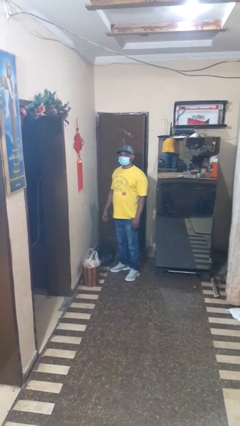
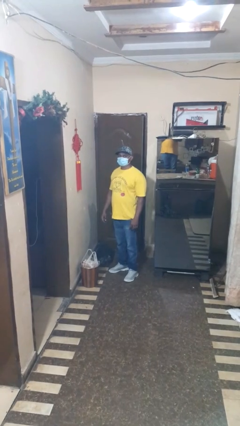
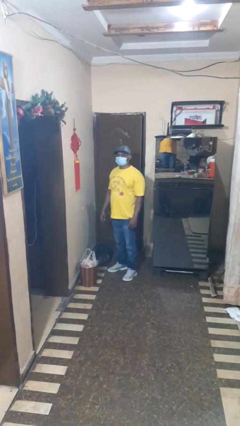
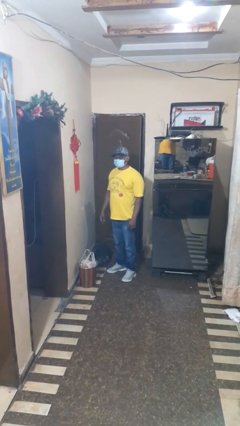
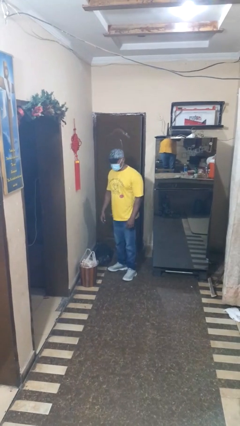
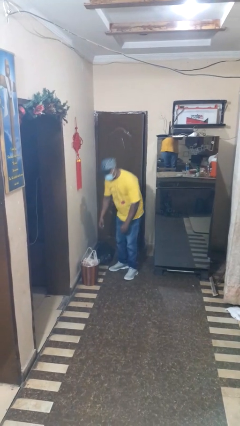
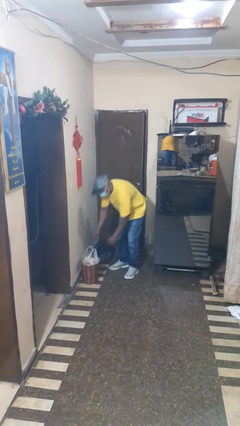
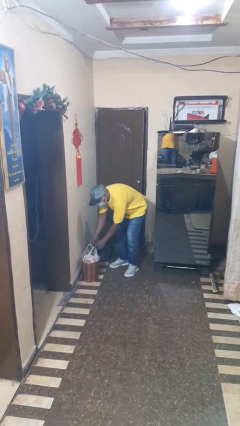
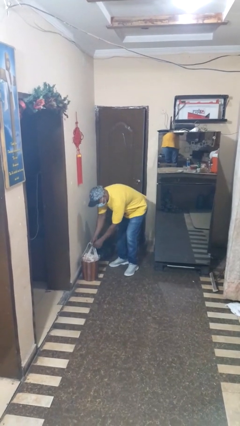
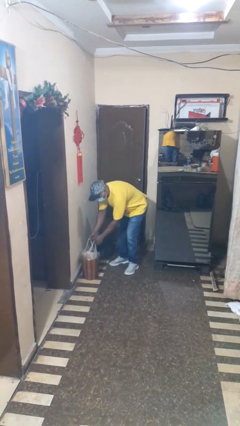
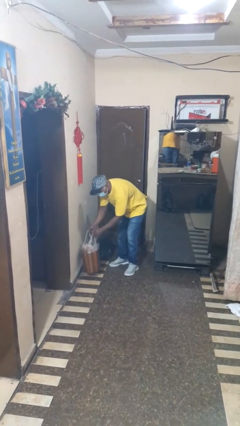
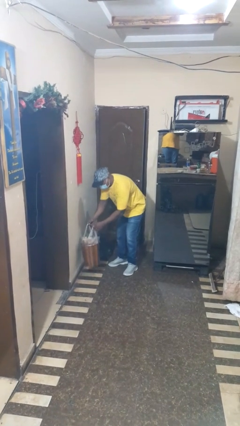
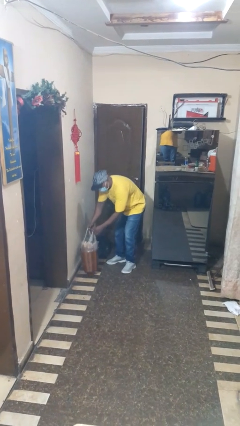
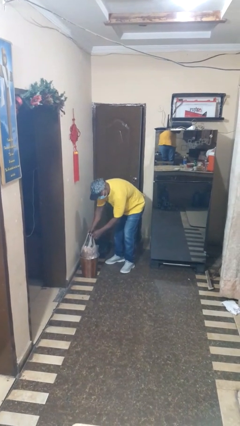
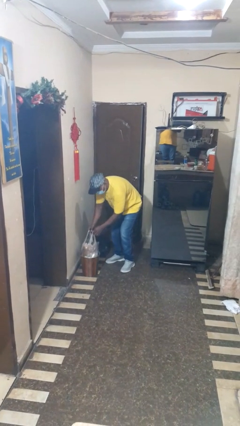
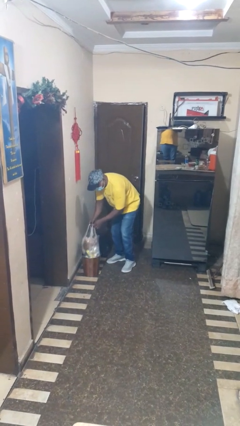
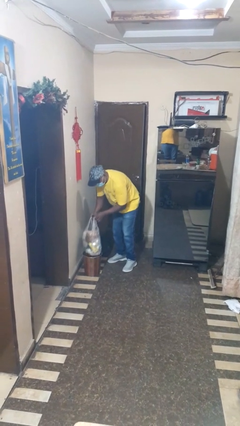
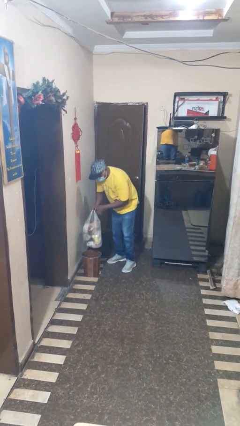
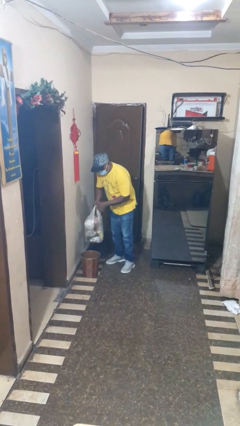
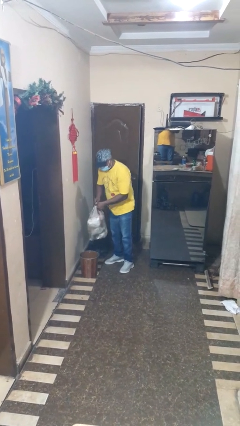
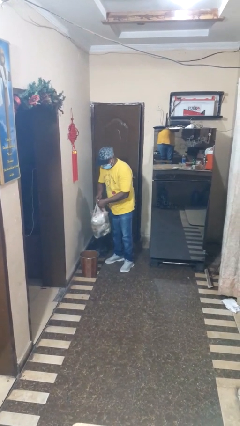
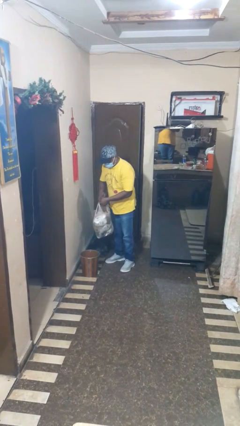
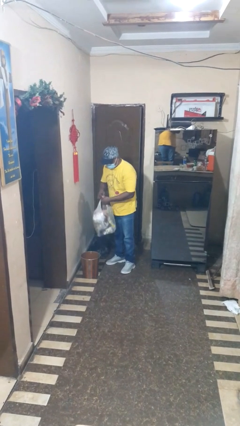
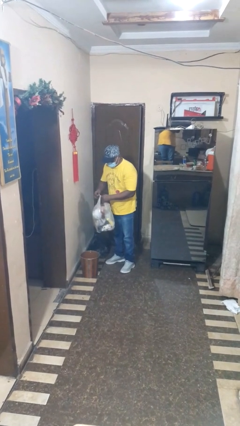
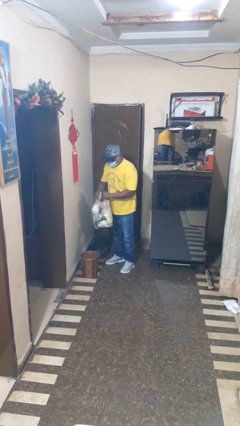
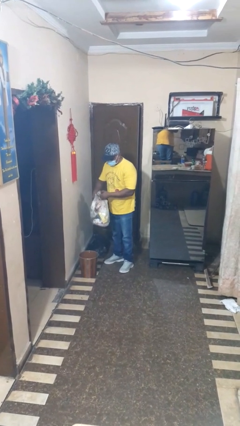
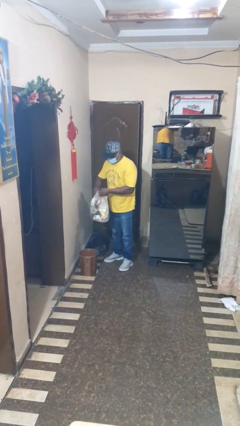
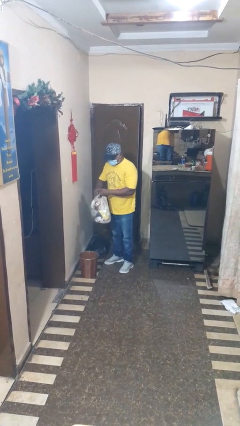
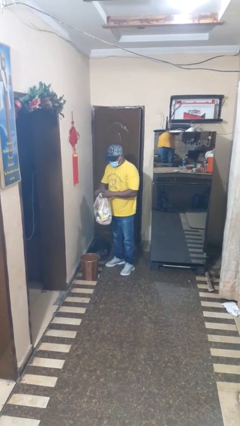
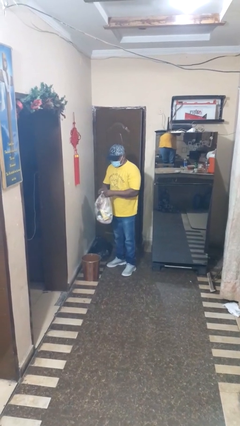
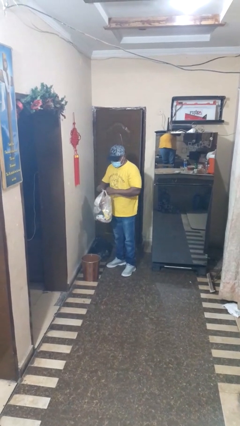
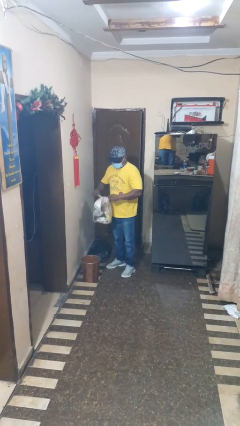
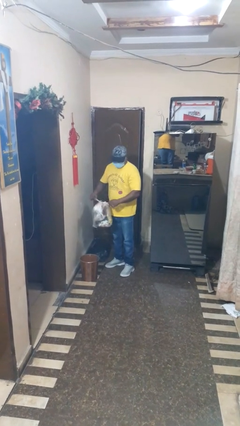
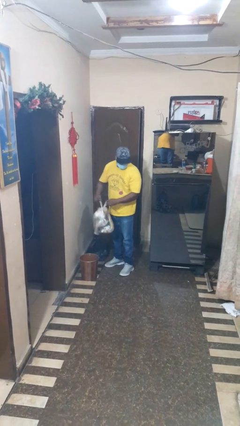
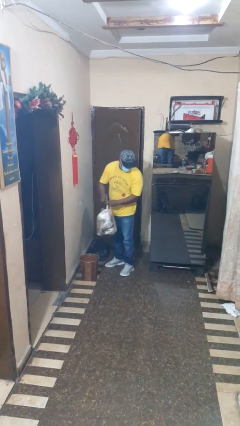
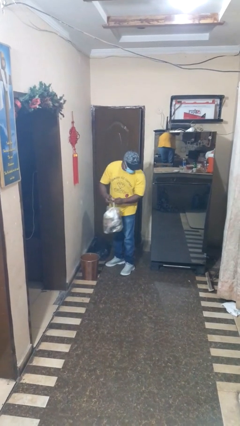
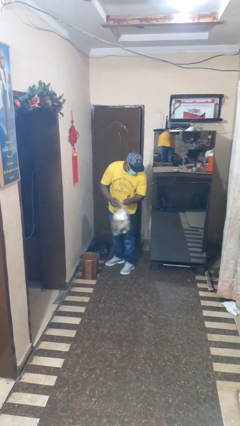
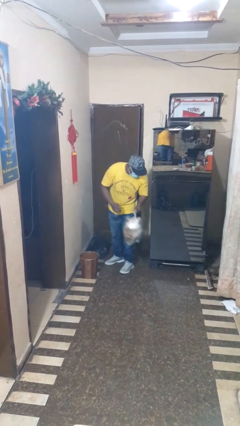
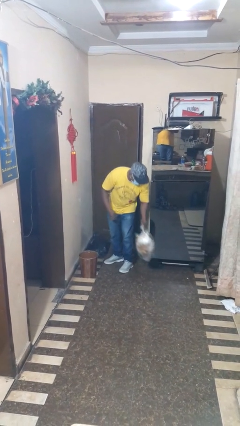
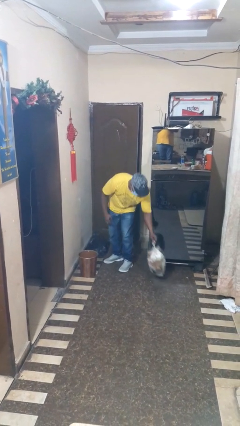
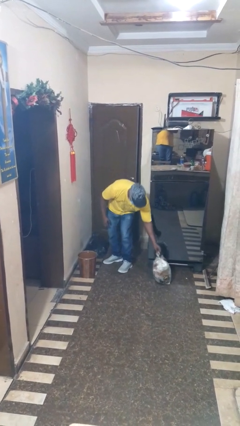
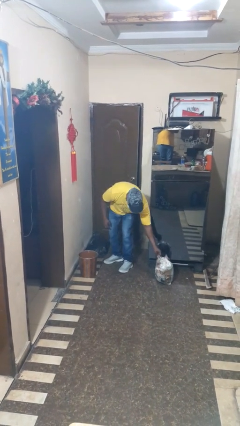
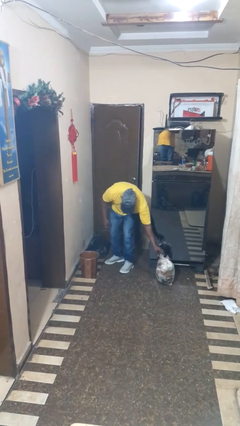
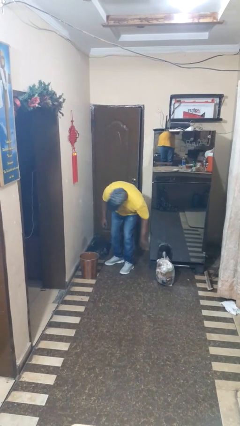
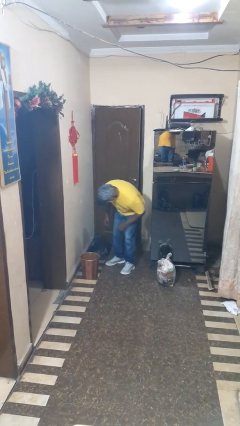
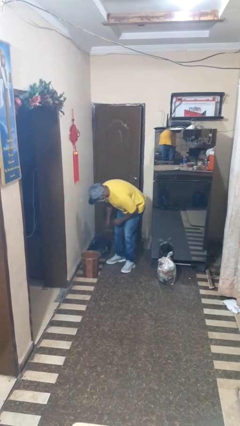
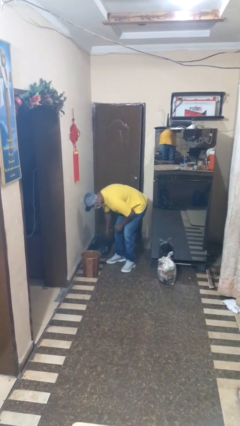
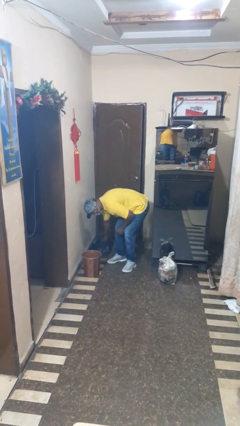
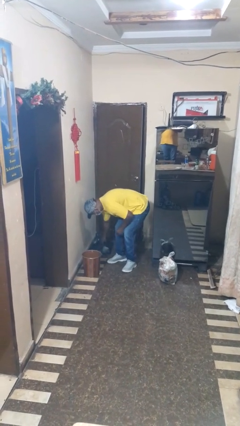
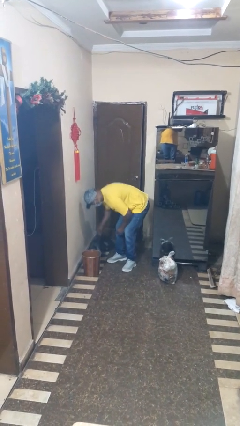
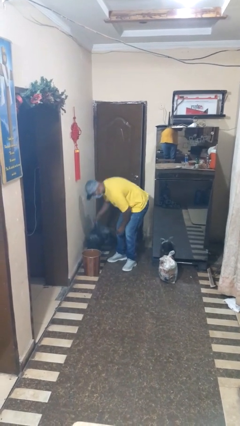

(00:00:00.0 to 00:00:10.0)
person removes trashbag from trashcan

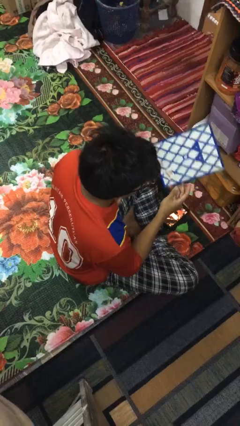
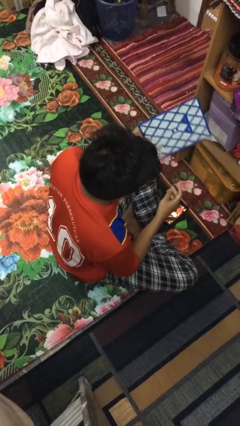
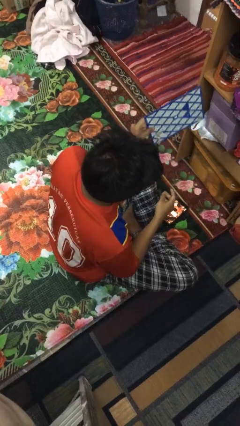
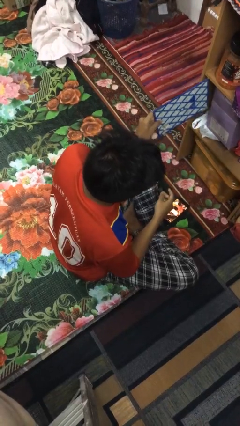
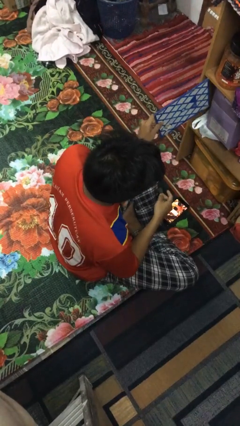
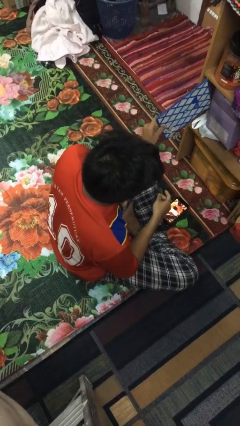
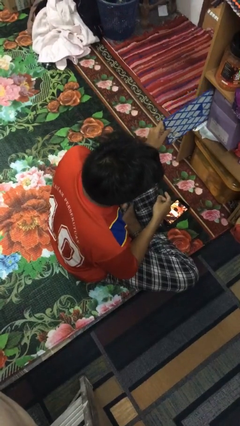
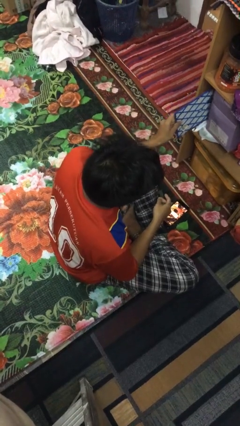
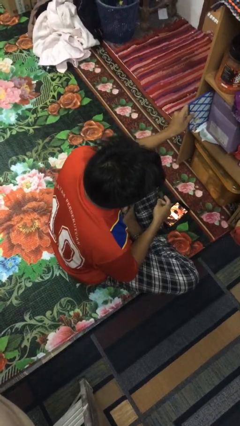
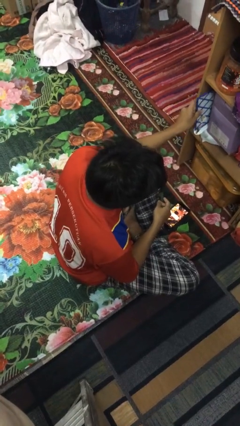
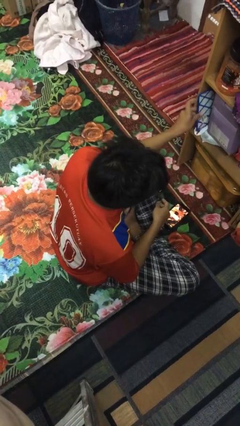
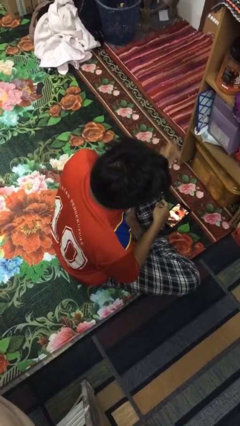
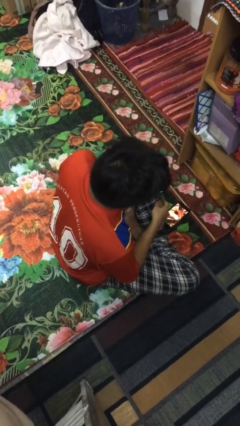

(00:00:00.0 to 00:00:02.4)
person puts down object into cabinet

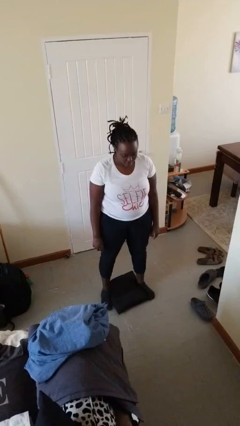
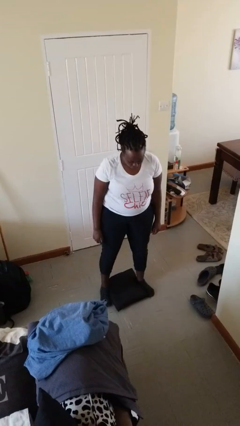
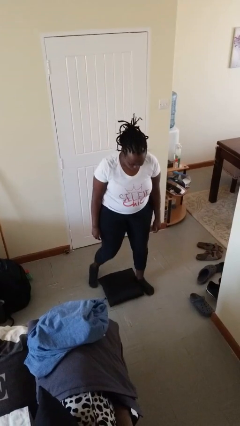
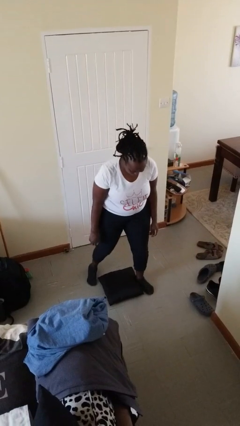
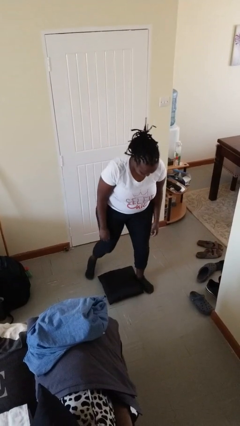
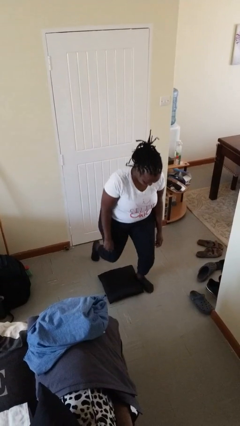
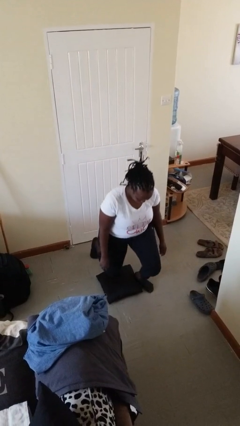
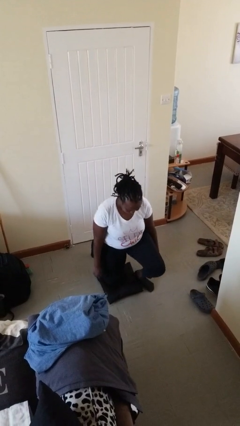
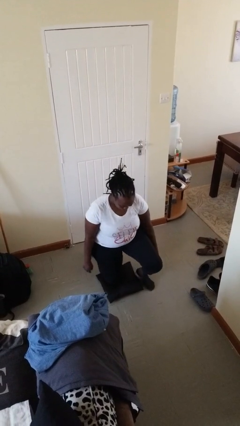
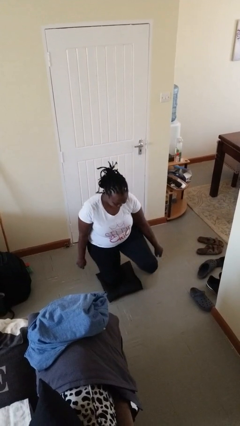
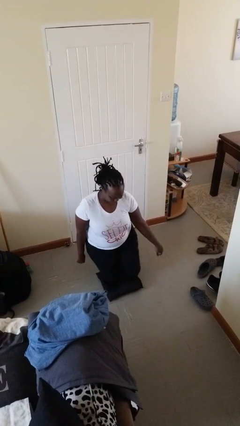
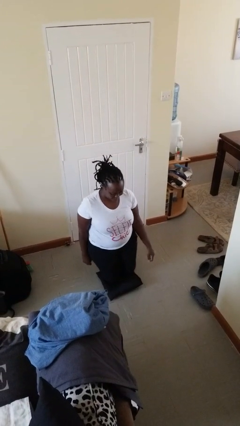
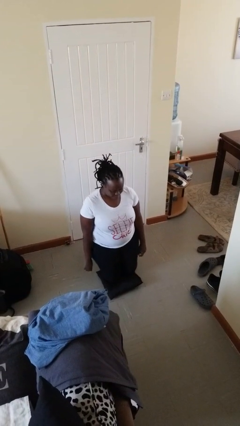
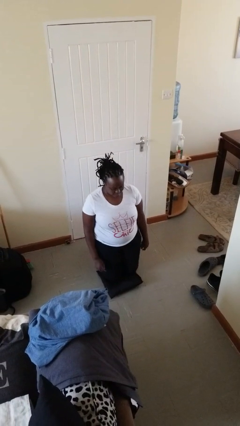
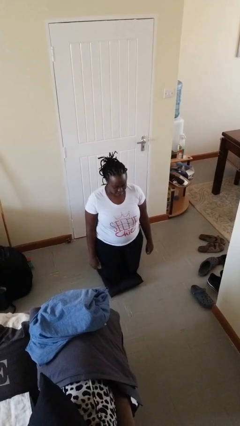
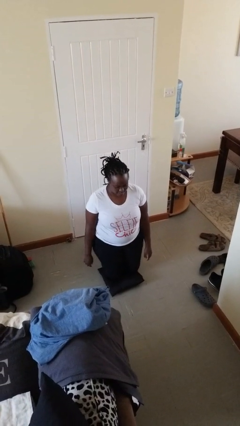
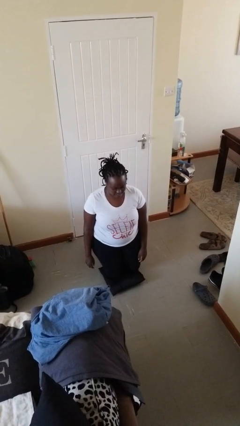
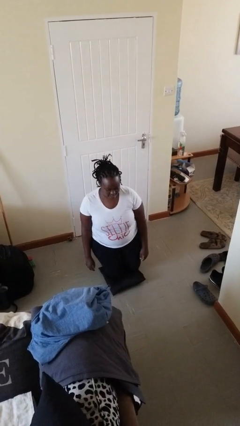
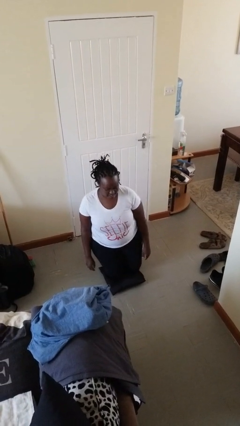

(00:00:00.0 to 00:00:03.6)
person kneels

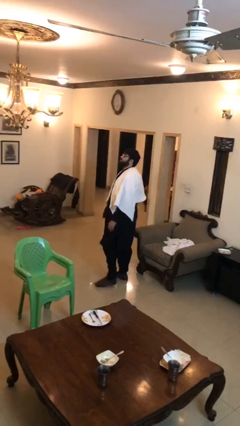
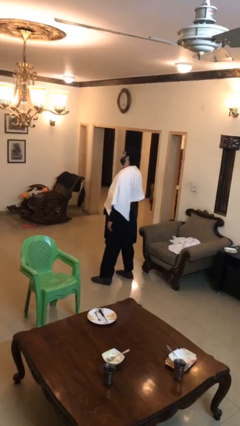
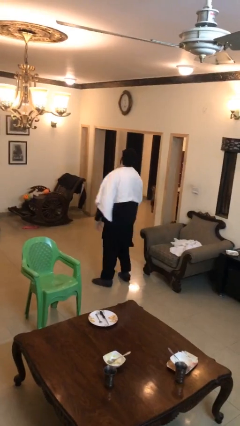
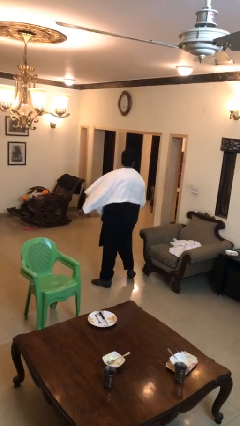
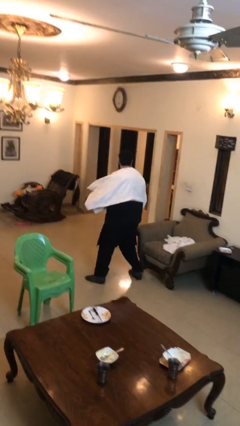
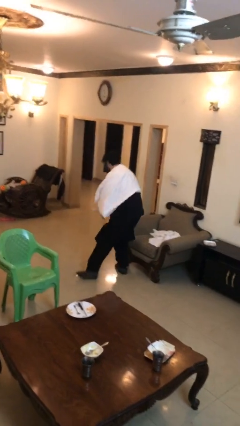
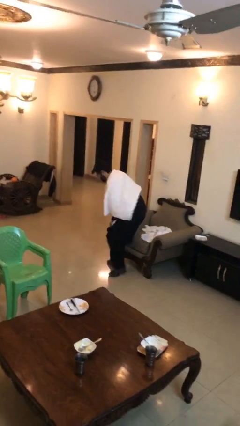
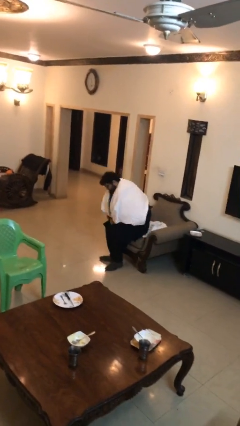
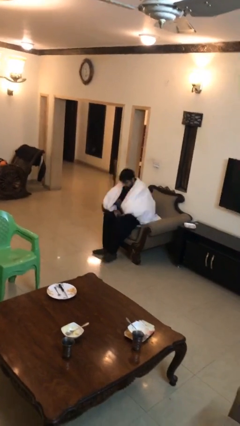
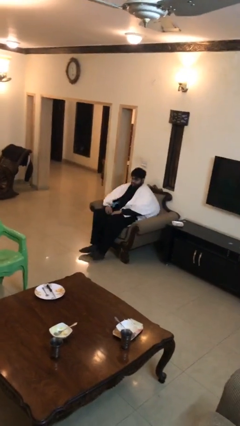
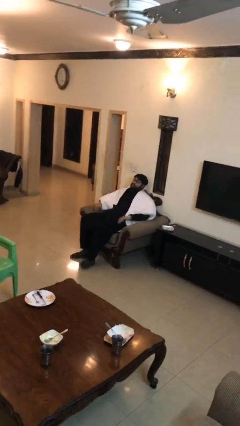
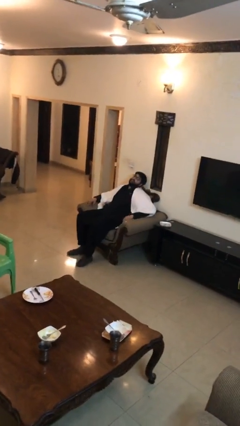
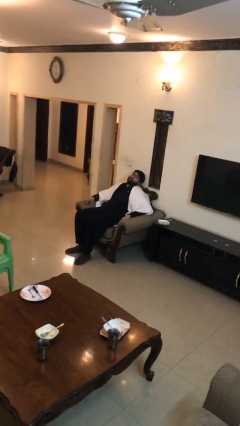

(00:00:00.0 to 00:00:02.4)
person sits down
